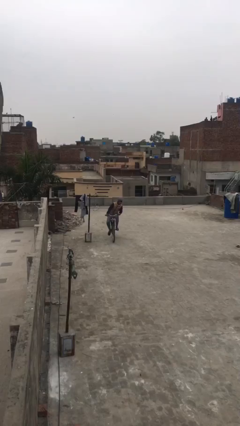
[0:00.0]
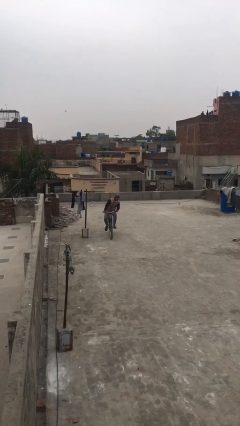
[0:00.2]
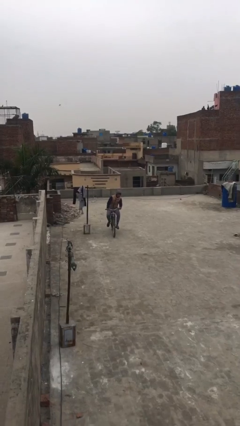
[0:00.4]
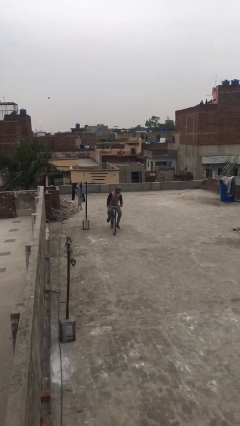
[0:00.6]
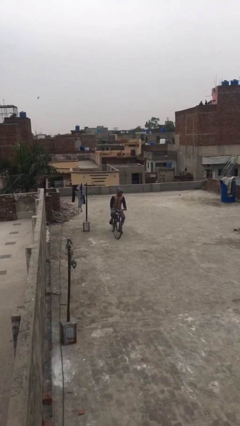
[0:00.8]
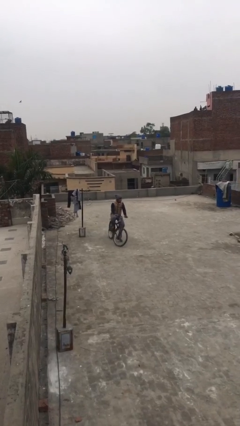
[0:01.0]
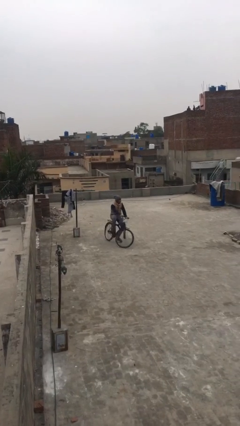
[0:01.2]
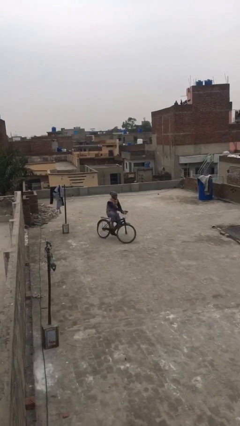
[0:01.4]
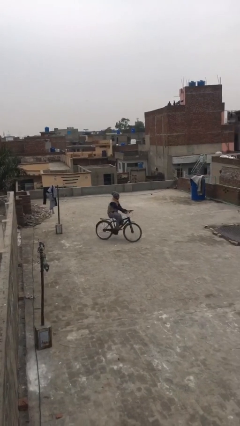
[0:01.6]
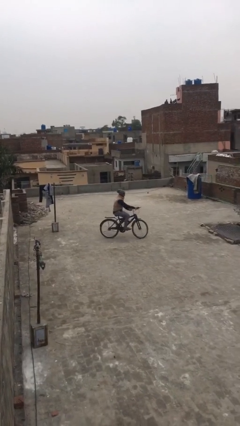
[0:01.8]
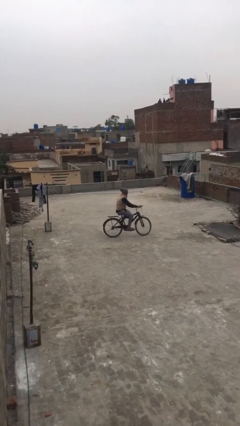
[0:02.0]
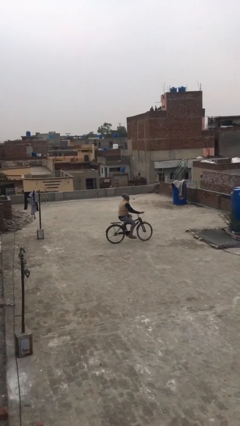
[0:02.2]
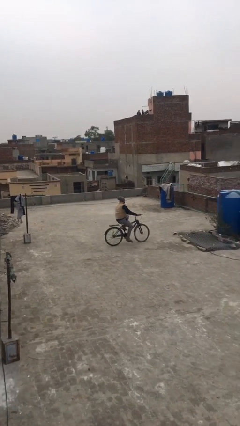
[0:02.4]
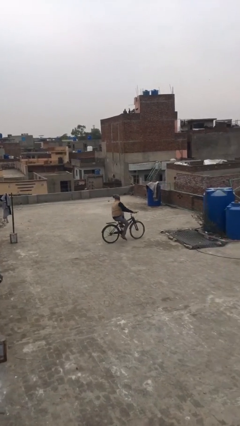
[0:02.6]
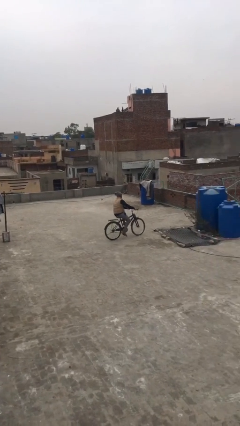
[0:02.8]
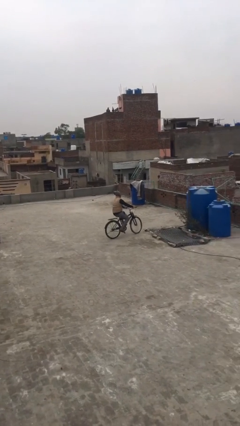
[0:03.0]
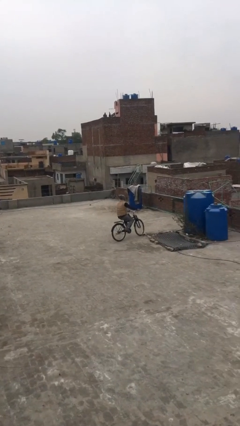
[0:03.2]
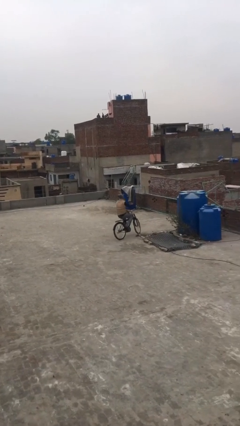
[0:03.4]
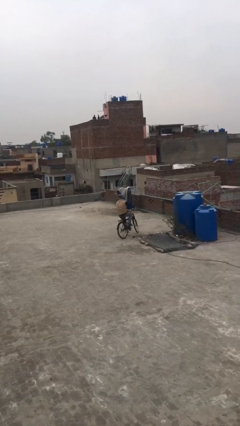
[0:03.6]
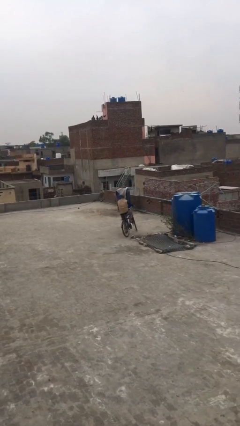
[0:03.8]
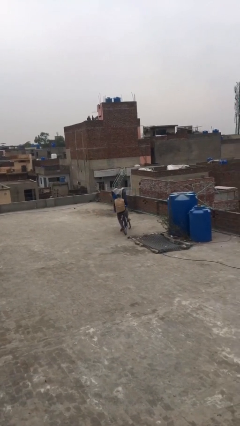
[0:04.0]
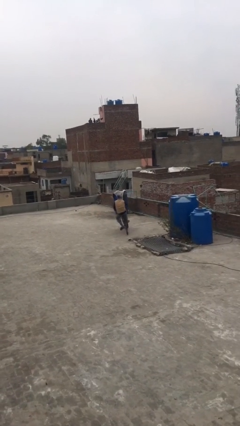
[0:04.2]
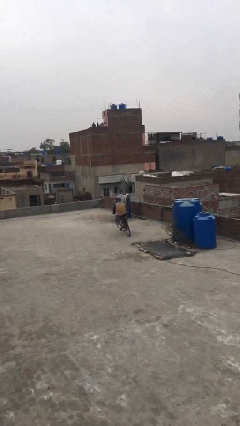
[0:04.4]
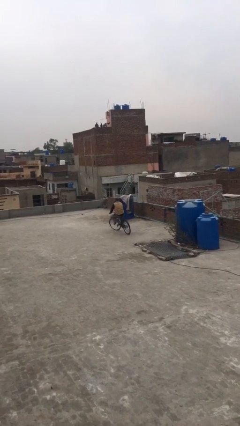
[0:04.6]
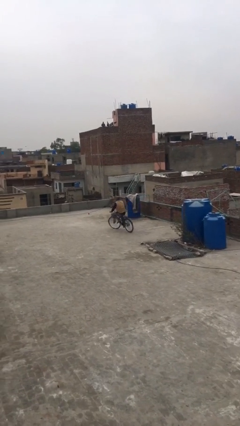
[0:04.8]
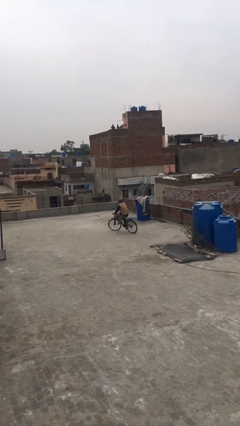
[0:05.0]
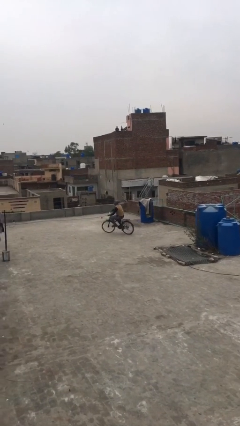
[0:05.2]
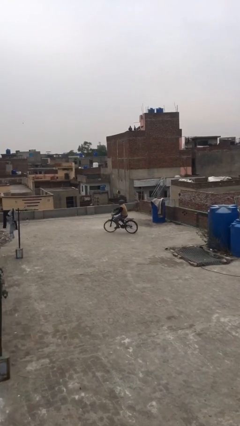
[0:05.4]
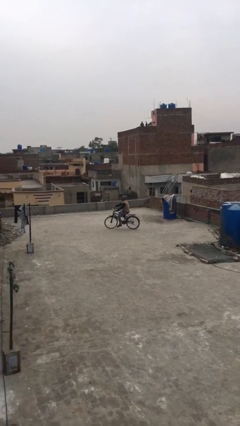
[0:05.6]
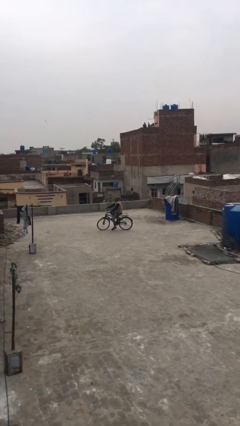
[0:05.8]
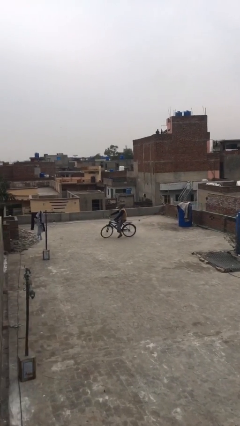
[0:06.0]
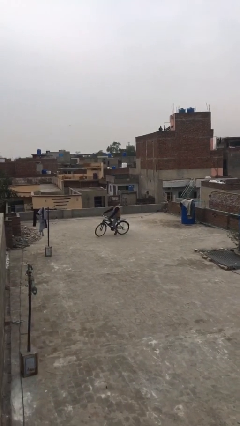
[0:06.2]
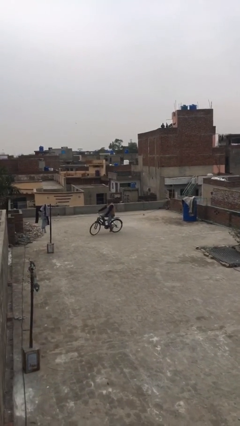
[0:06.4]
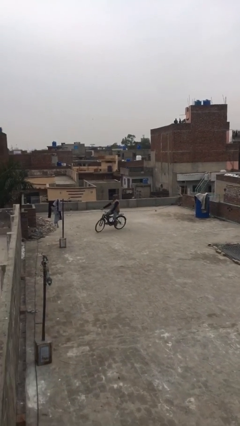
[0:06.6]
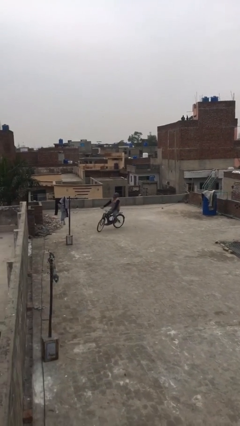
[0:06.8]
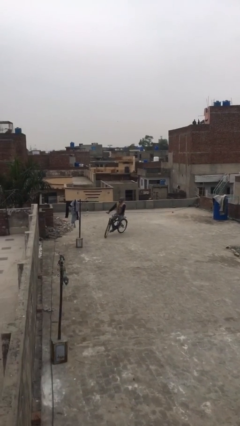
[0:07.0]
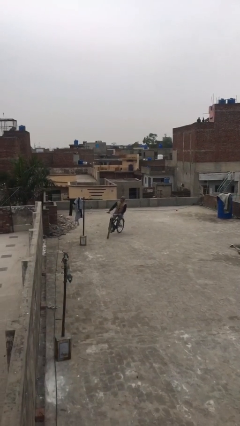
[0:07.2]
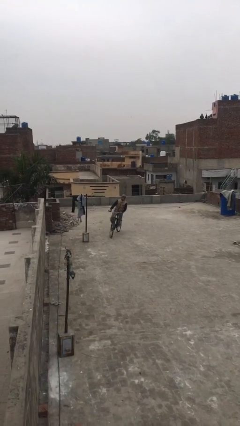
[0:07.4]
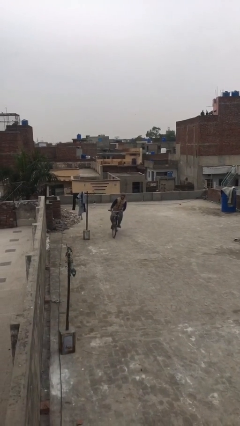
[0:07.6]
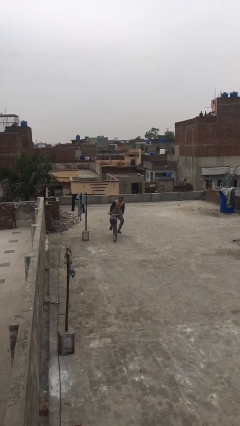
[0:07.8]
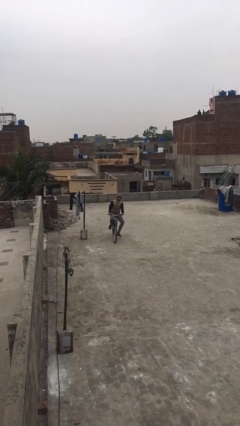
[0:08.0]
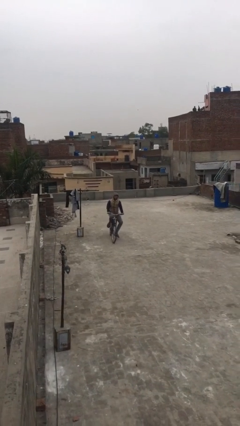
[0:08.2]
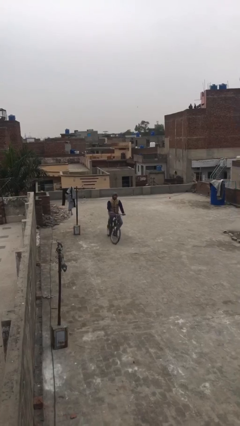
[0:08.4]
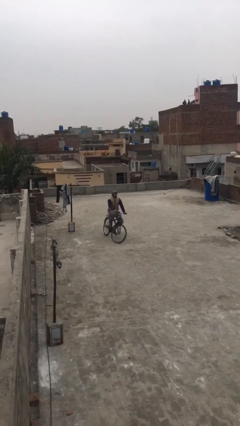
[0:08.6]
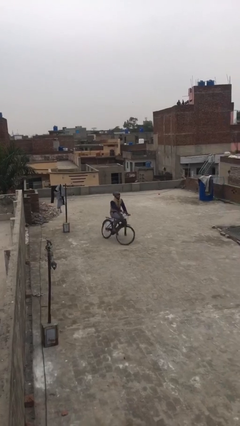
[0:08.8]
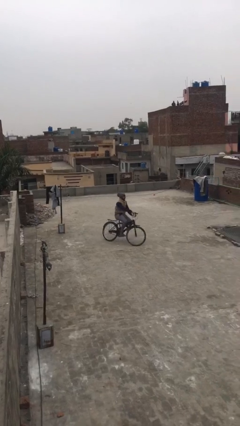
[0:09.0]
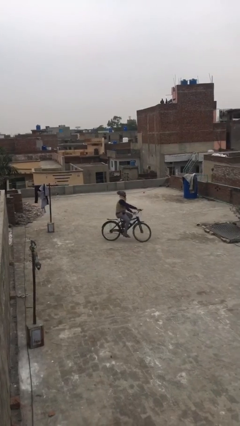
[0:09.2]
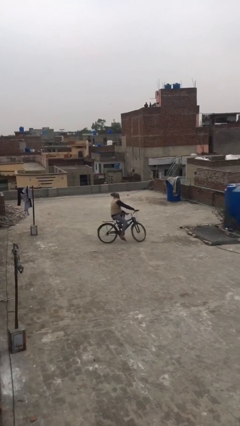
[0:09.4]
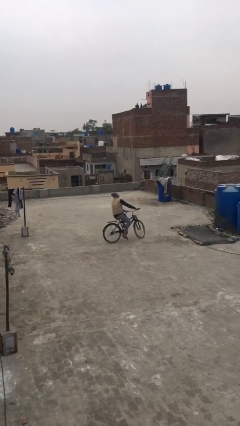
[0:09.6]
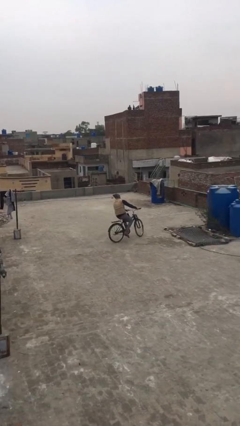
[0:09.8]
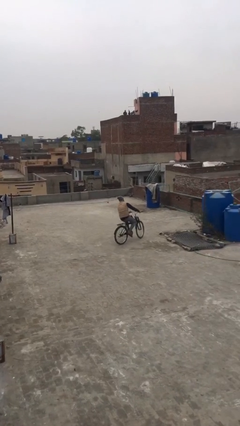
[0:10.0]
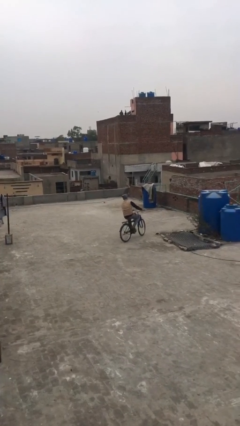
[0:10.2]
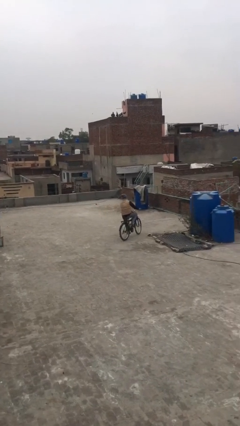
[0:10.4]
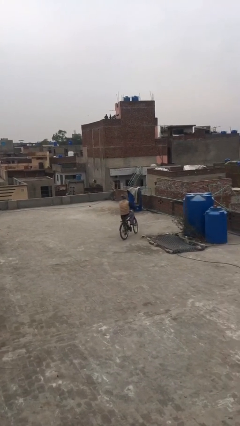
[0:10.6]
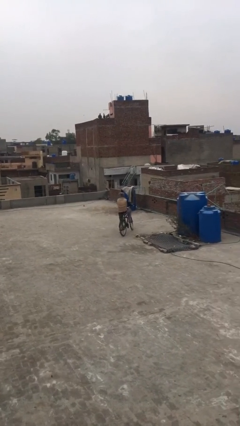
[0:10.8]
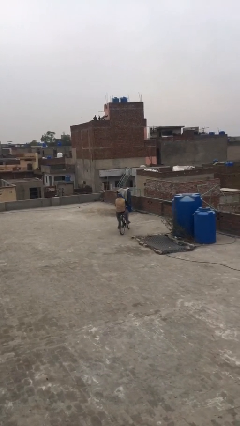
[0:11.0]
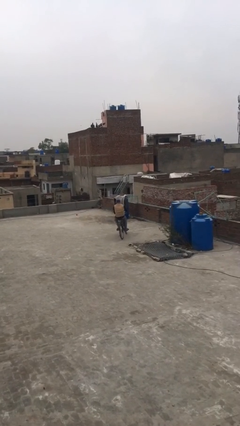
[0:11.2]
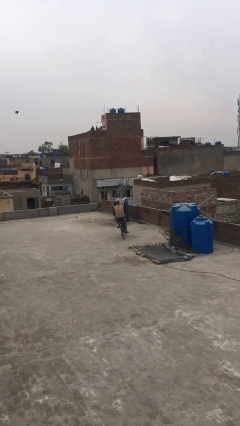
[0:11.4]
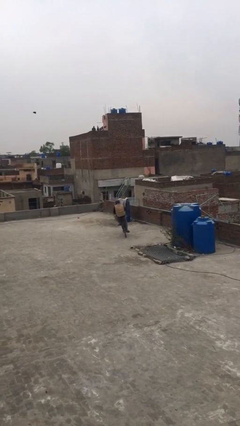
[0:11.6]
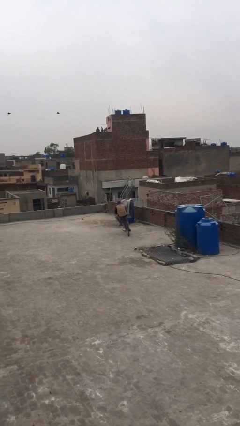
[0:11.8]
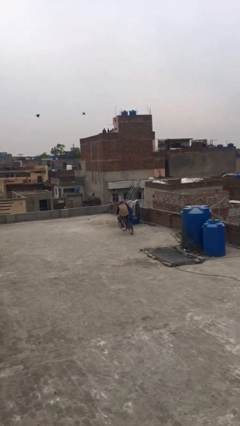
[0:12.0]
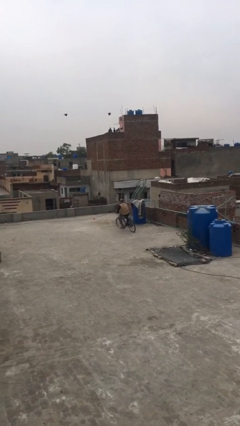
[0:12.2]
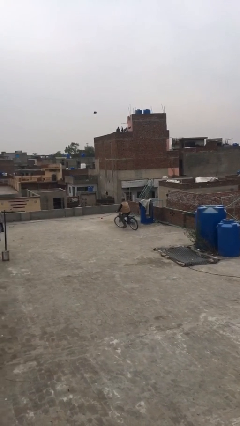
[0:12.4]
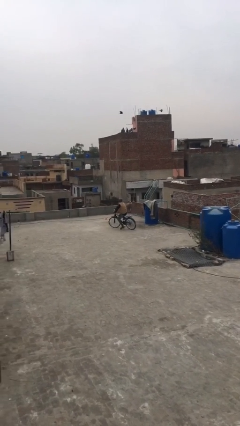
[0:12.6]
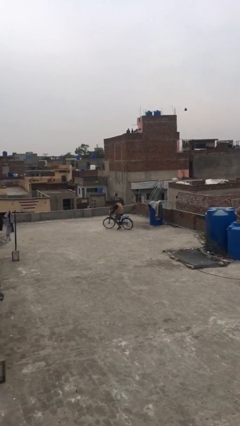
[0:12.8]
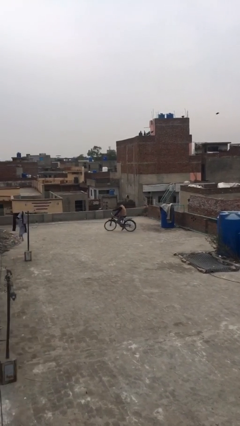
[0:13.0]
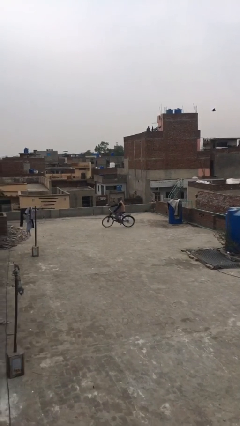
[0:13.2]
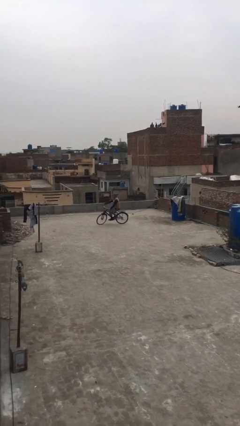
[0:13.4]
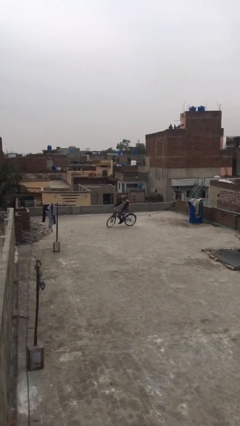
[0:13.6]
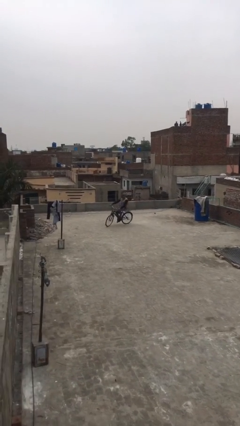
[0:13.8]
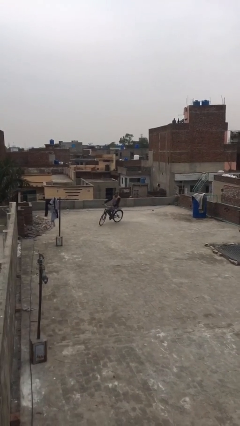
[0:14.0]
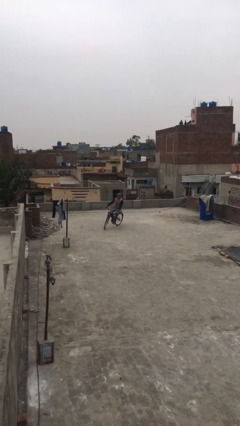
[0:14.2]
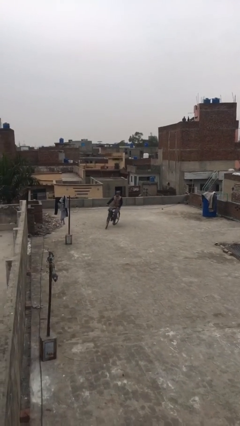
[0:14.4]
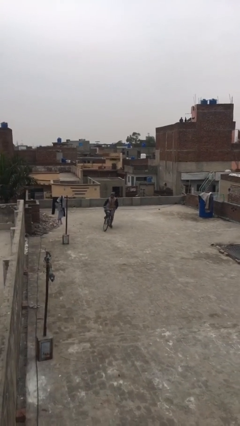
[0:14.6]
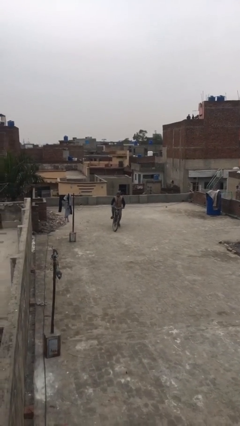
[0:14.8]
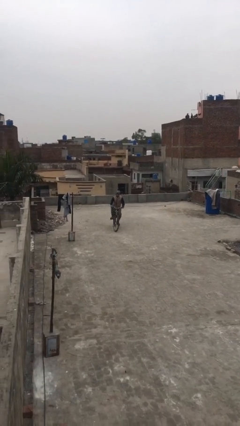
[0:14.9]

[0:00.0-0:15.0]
person rides bicycle

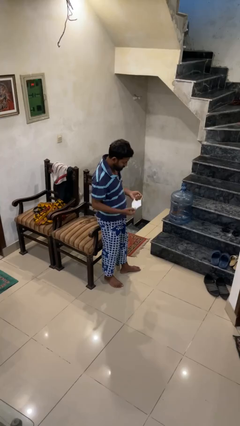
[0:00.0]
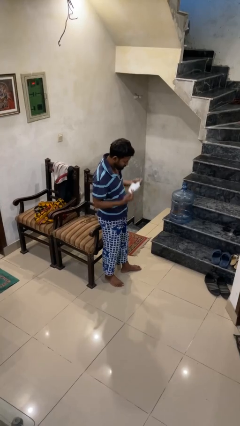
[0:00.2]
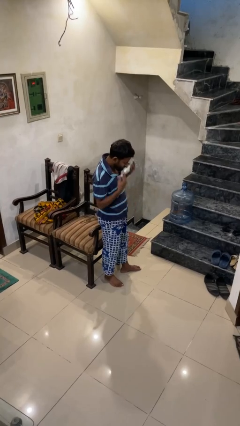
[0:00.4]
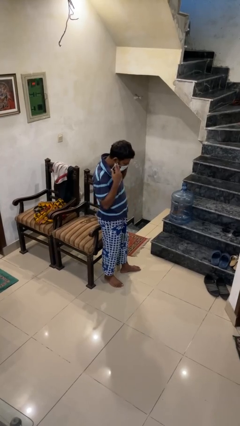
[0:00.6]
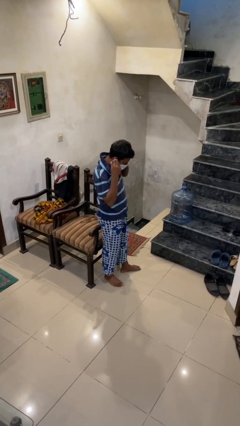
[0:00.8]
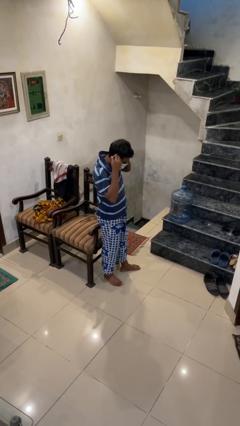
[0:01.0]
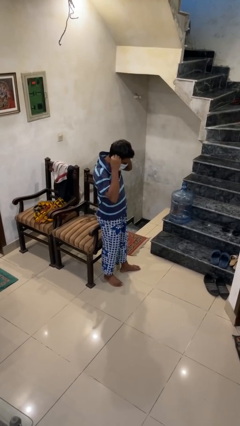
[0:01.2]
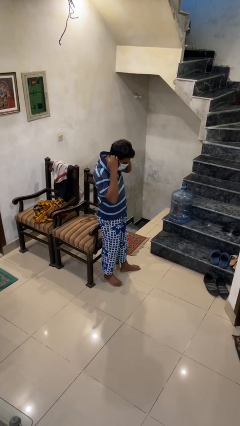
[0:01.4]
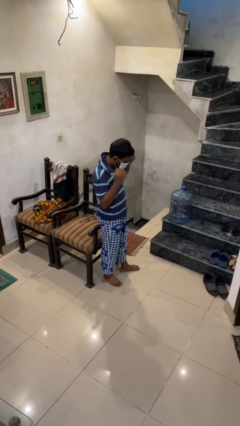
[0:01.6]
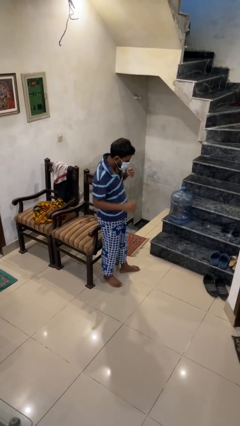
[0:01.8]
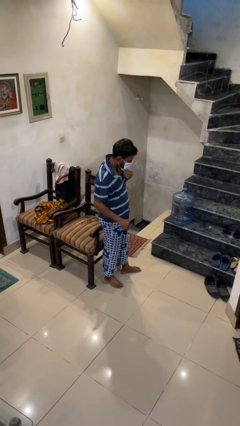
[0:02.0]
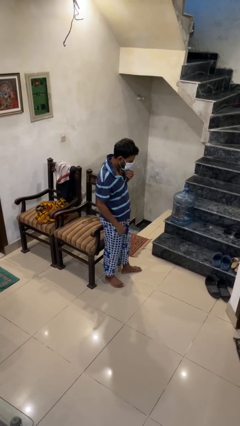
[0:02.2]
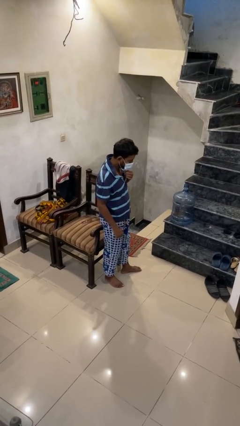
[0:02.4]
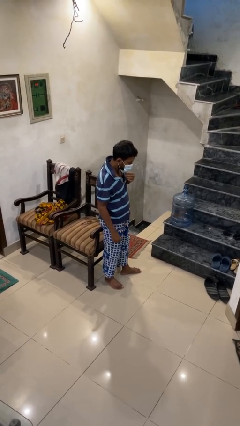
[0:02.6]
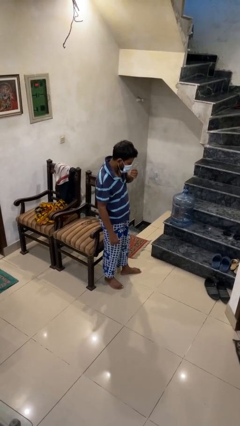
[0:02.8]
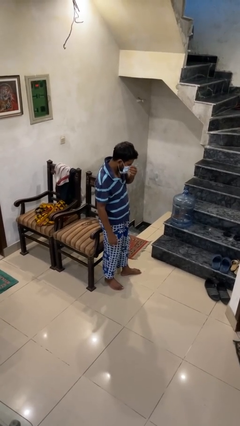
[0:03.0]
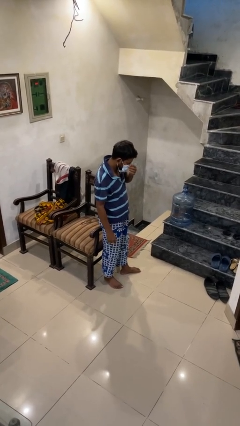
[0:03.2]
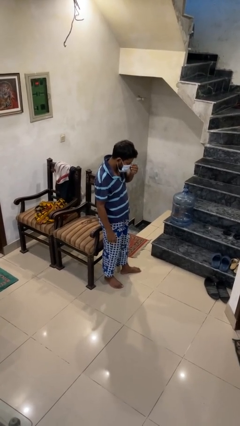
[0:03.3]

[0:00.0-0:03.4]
person puts on facemask
